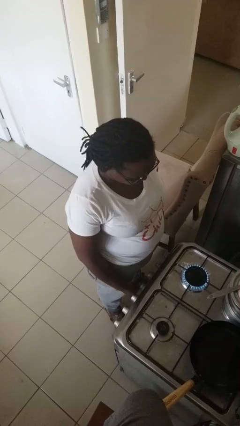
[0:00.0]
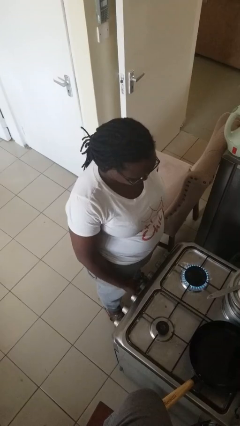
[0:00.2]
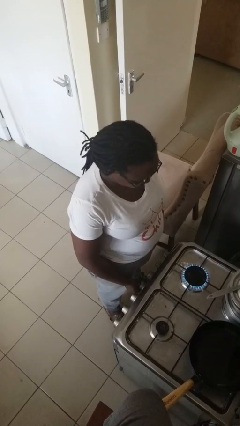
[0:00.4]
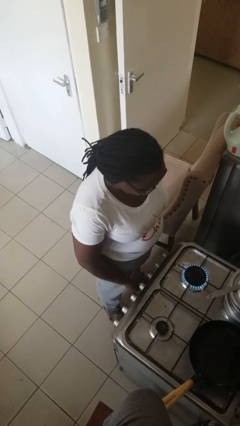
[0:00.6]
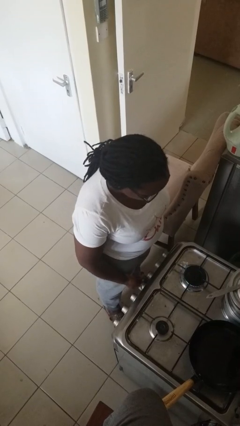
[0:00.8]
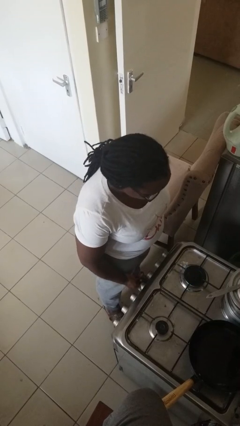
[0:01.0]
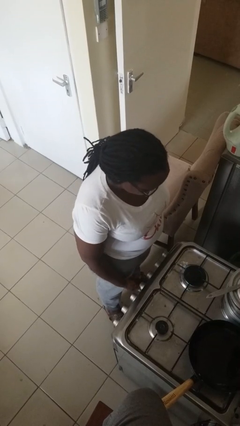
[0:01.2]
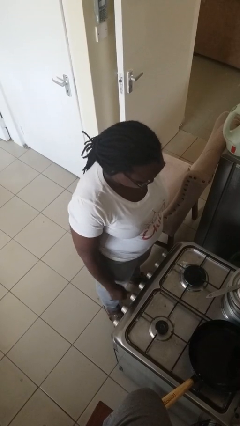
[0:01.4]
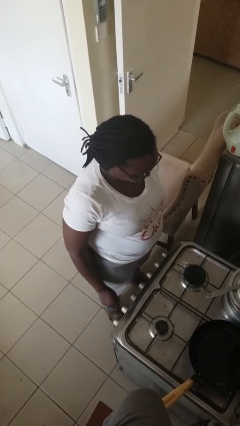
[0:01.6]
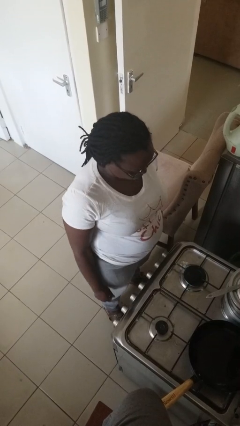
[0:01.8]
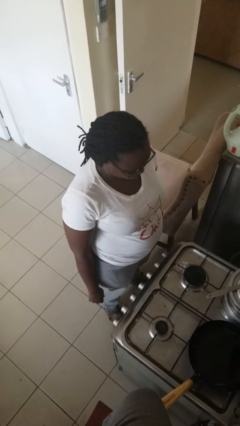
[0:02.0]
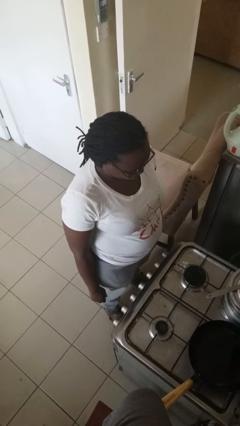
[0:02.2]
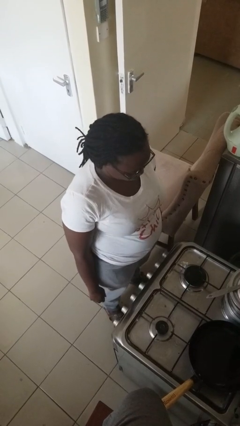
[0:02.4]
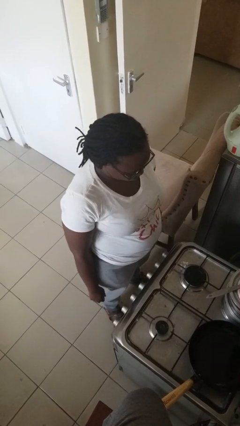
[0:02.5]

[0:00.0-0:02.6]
person turns off stovetop

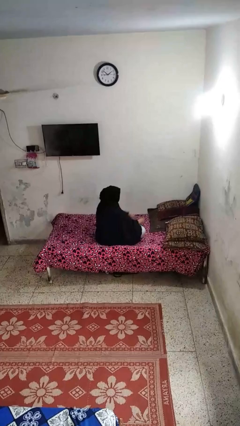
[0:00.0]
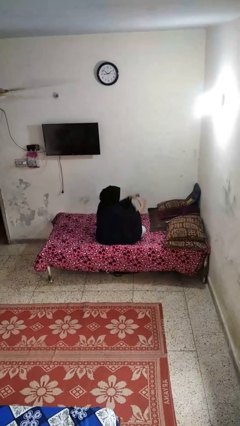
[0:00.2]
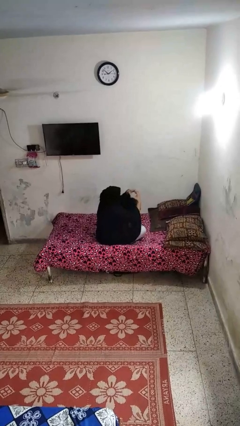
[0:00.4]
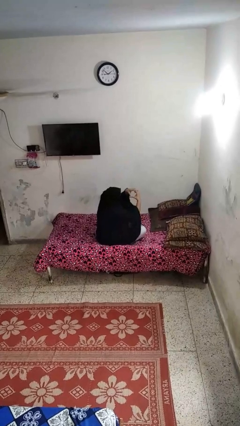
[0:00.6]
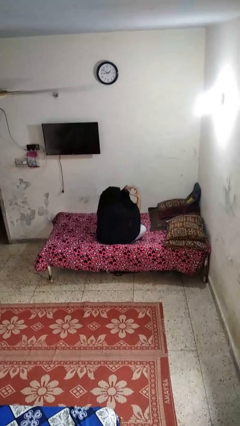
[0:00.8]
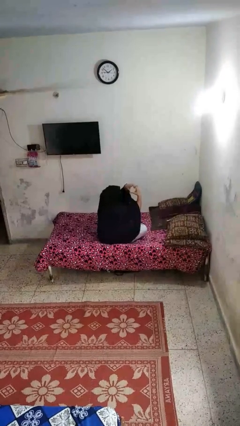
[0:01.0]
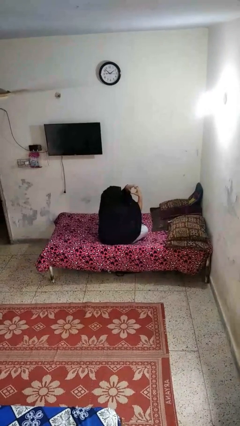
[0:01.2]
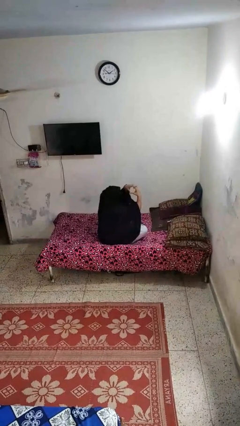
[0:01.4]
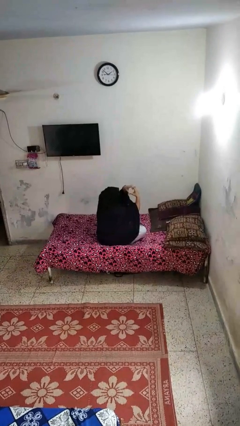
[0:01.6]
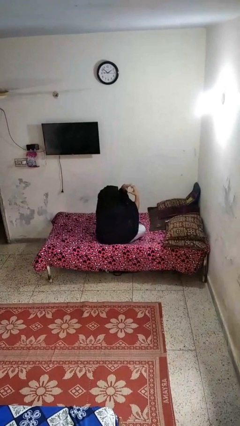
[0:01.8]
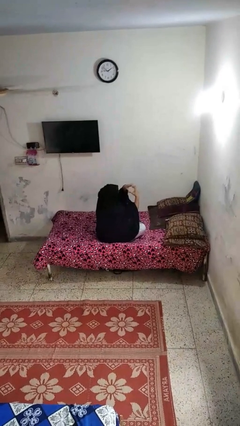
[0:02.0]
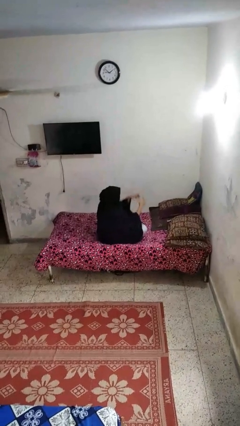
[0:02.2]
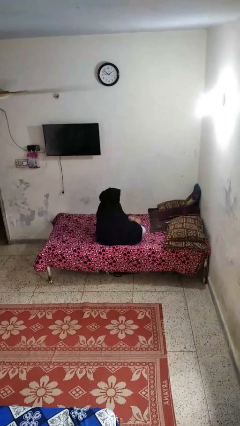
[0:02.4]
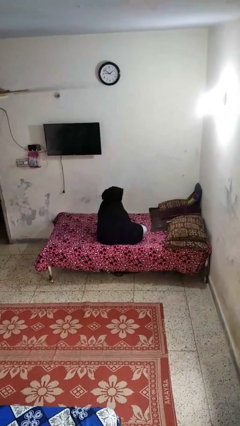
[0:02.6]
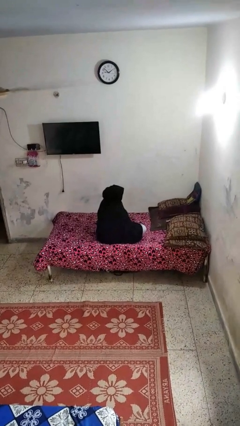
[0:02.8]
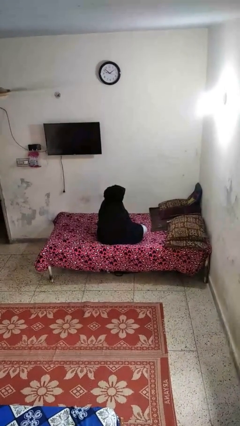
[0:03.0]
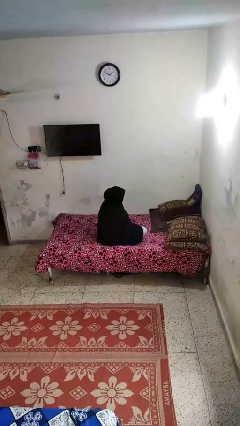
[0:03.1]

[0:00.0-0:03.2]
person gestures heart

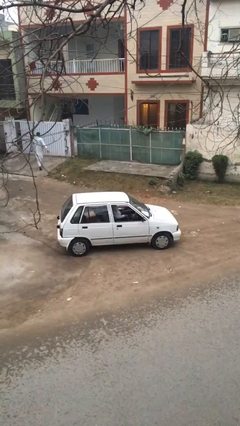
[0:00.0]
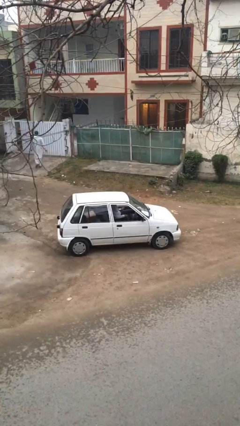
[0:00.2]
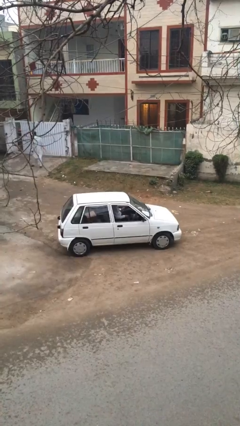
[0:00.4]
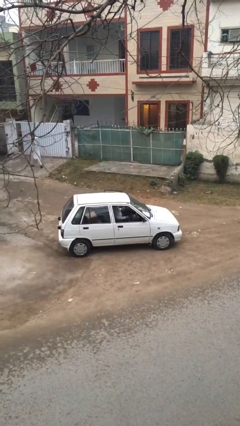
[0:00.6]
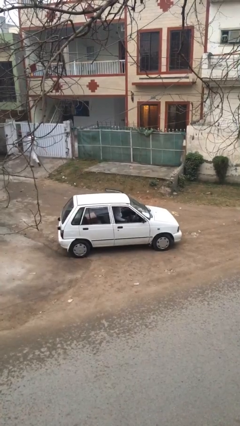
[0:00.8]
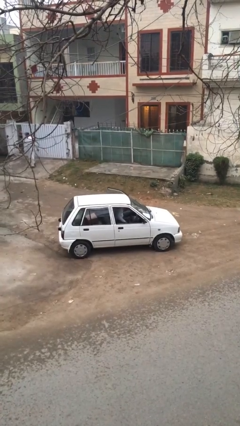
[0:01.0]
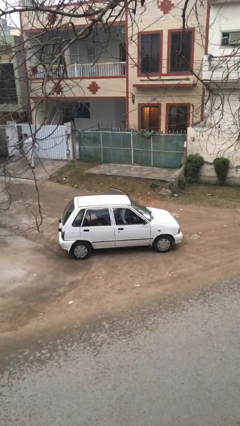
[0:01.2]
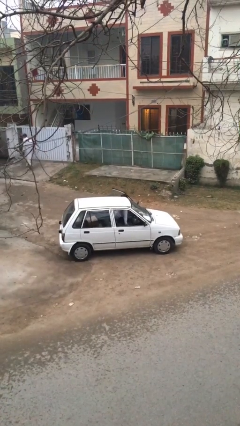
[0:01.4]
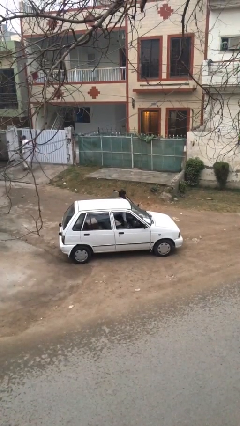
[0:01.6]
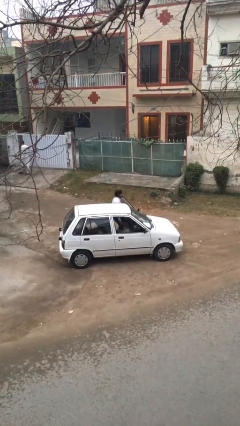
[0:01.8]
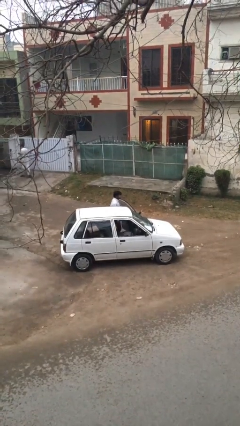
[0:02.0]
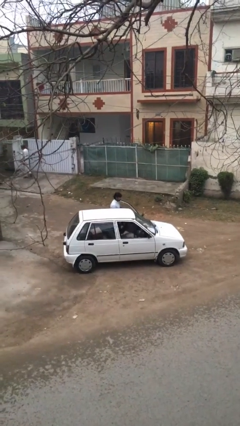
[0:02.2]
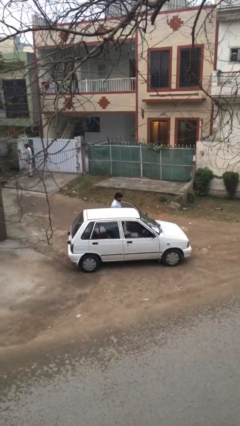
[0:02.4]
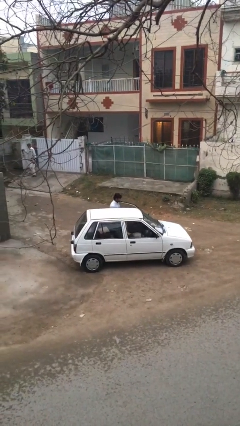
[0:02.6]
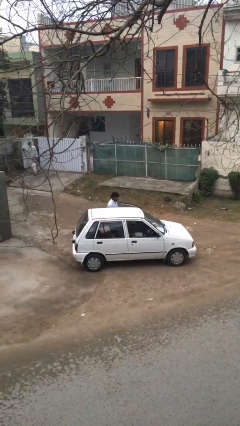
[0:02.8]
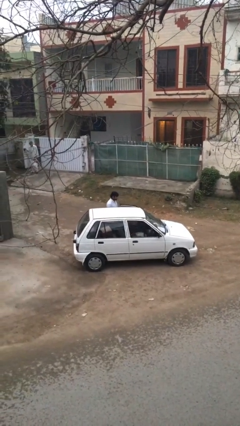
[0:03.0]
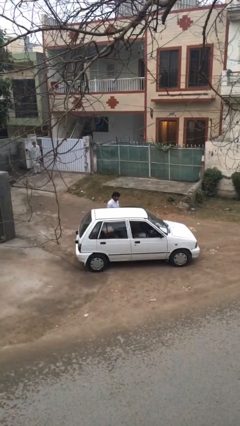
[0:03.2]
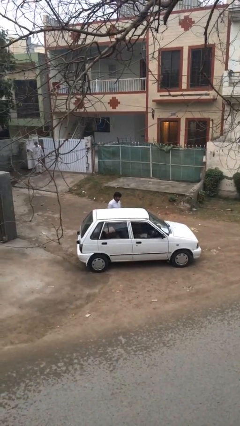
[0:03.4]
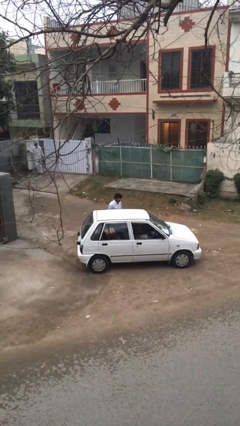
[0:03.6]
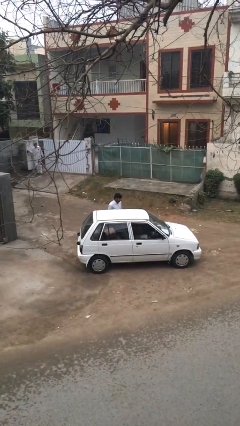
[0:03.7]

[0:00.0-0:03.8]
person exits car

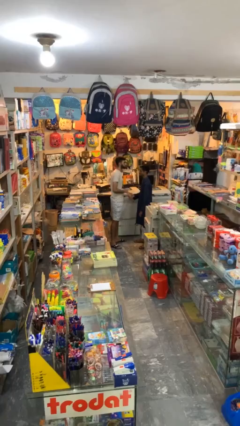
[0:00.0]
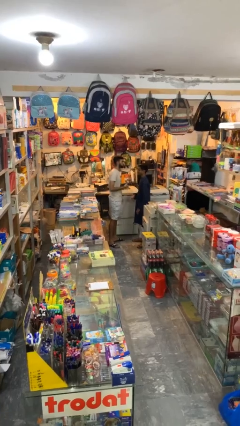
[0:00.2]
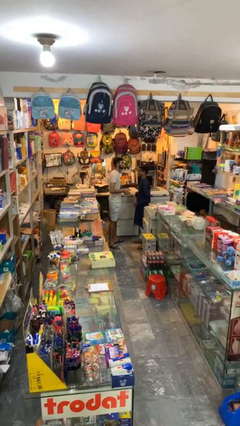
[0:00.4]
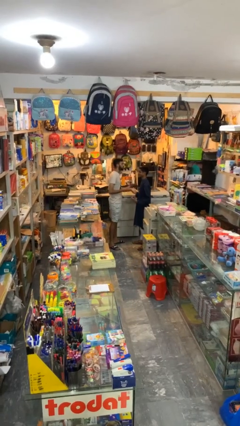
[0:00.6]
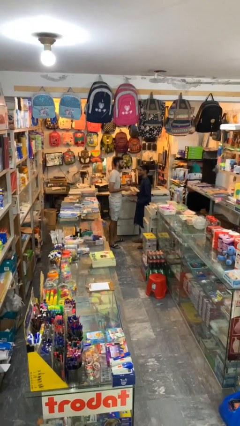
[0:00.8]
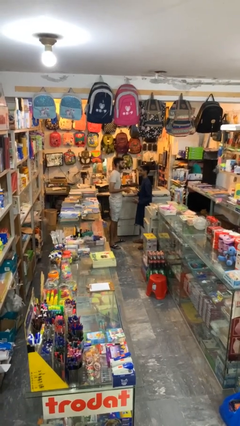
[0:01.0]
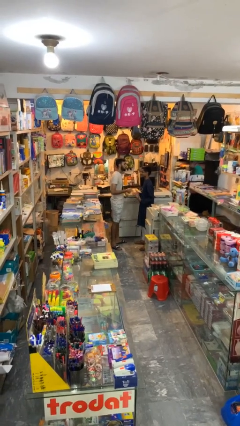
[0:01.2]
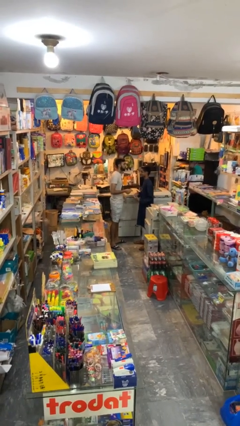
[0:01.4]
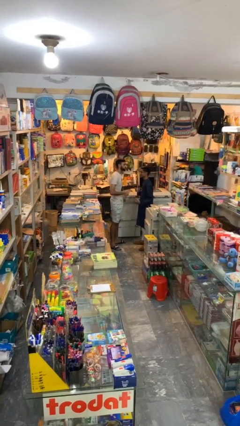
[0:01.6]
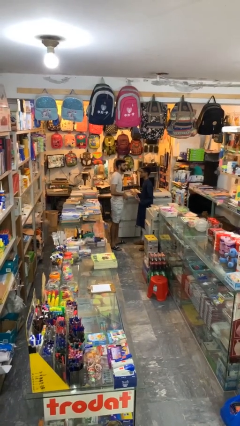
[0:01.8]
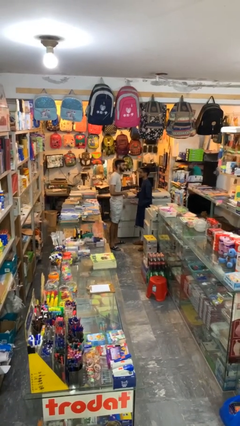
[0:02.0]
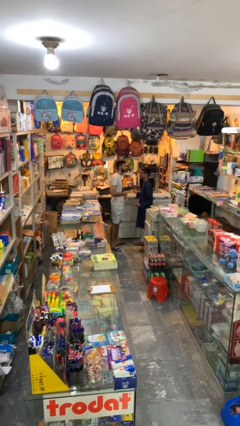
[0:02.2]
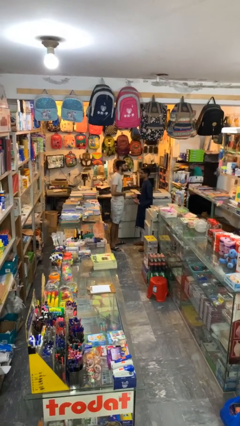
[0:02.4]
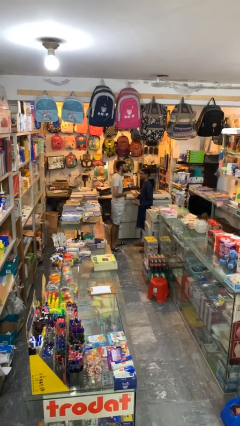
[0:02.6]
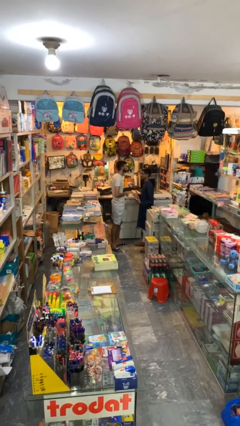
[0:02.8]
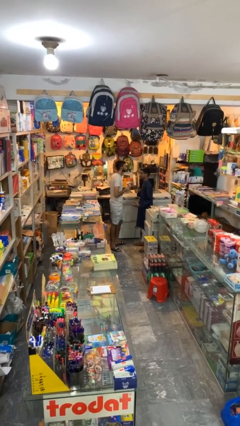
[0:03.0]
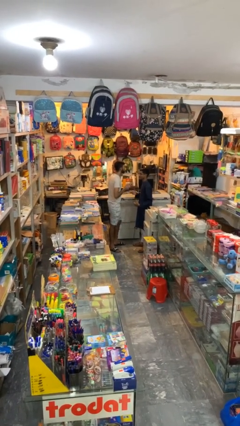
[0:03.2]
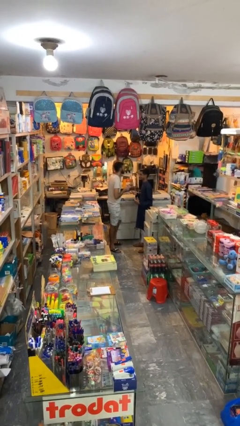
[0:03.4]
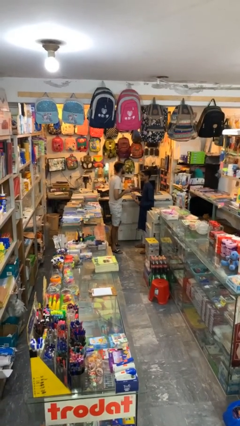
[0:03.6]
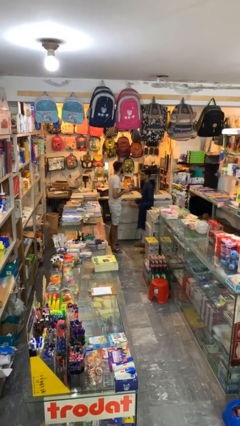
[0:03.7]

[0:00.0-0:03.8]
person talks to person

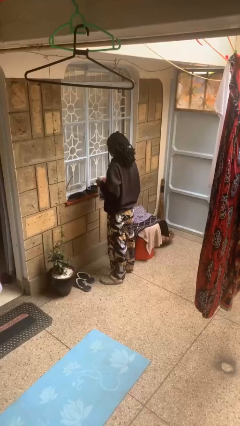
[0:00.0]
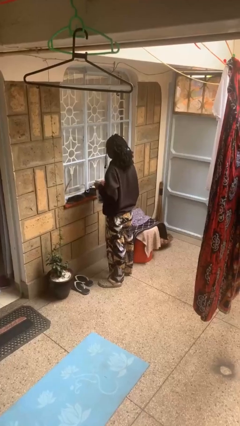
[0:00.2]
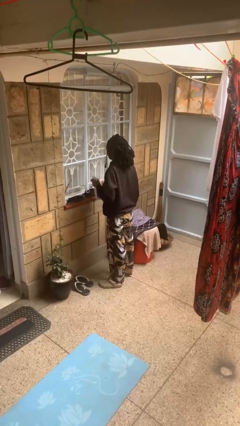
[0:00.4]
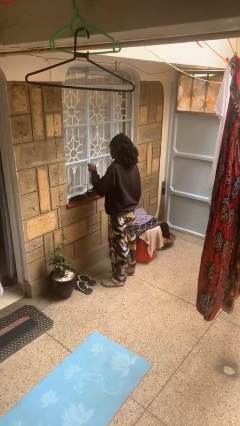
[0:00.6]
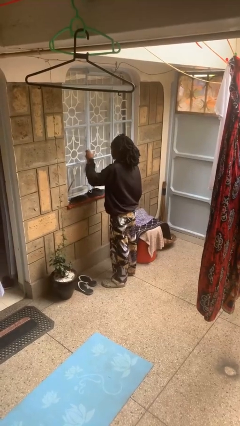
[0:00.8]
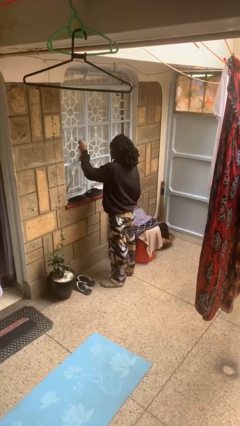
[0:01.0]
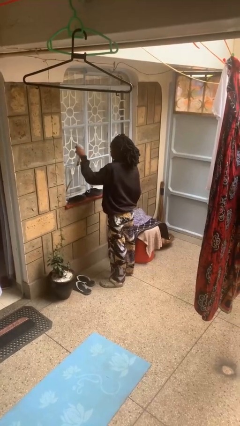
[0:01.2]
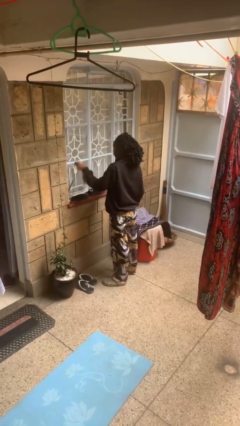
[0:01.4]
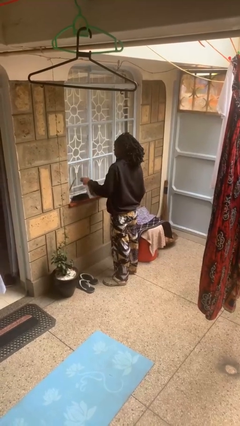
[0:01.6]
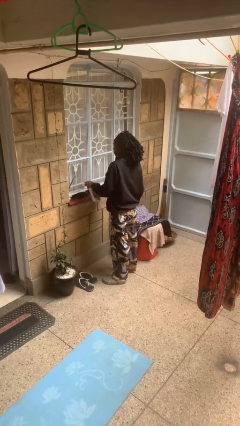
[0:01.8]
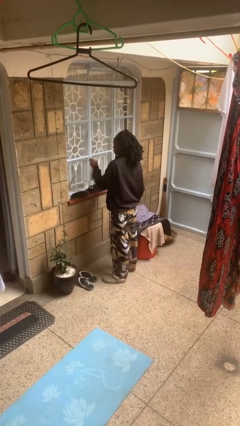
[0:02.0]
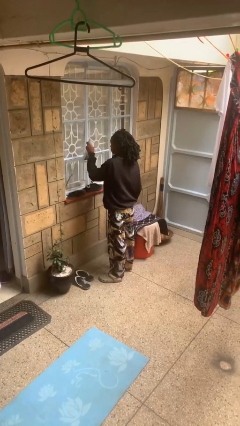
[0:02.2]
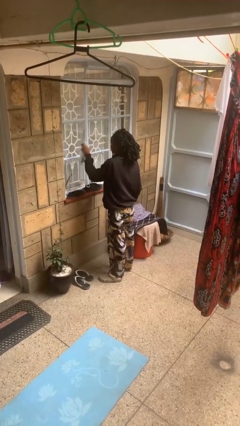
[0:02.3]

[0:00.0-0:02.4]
person sprays from bottle

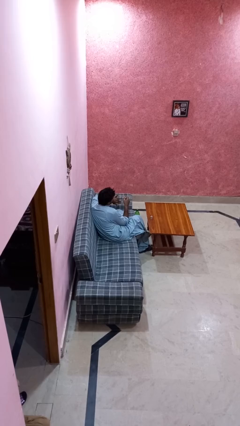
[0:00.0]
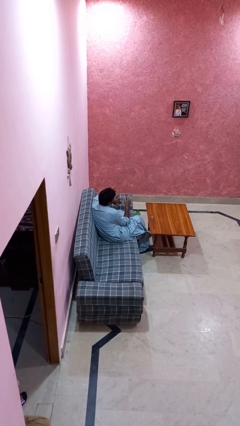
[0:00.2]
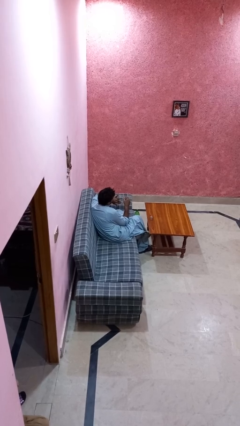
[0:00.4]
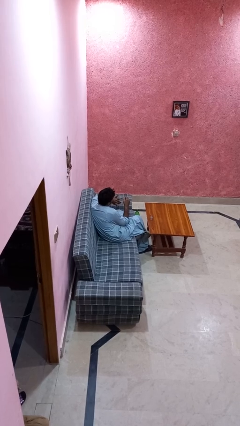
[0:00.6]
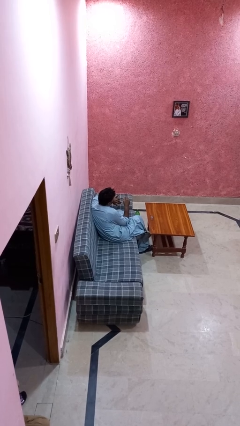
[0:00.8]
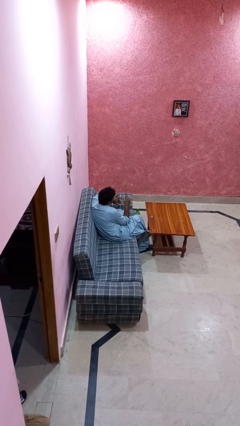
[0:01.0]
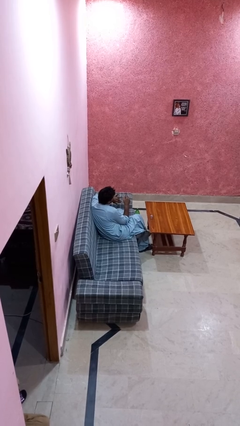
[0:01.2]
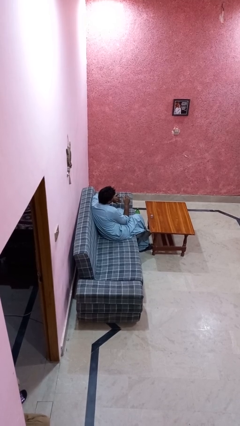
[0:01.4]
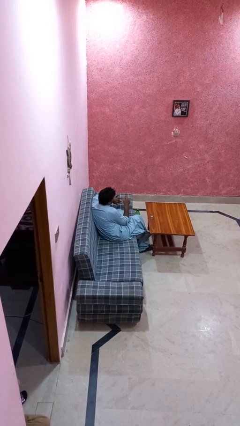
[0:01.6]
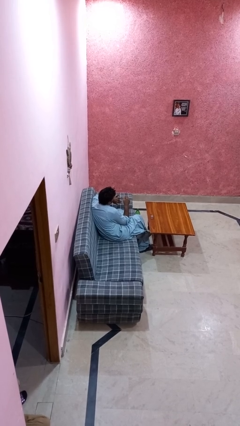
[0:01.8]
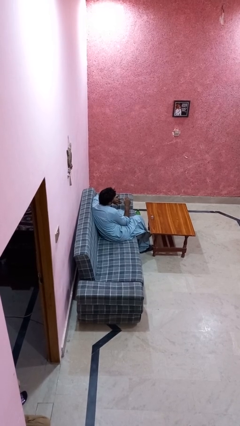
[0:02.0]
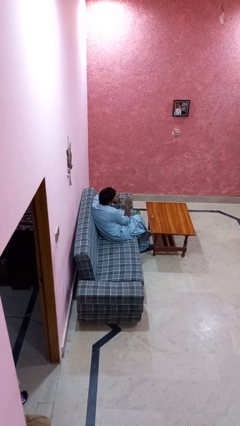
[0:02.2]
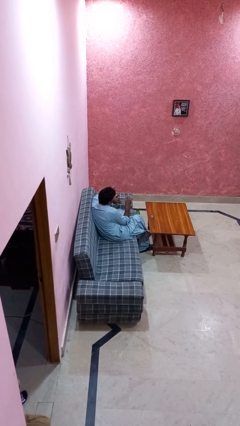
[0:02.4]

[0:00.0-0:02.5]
person paints fingernails
